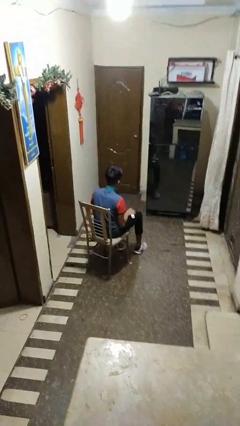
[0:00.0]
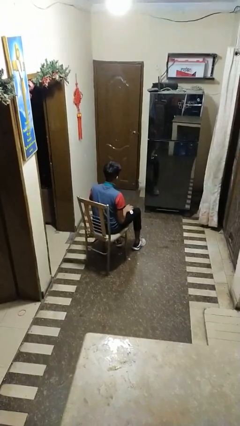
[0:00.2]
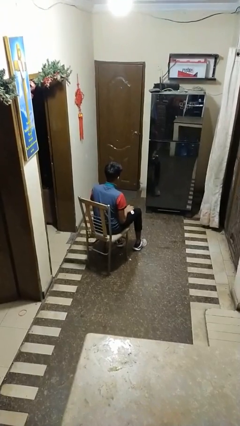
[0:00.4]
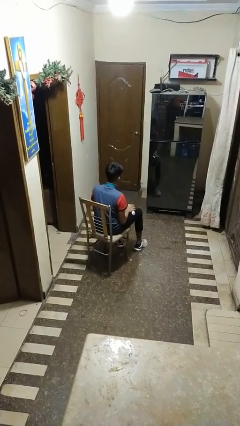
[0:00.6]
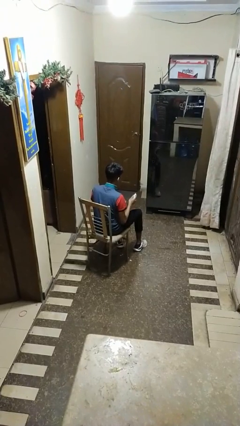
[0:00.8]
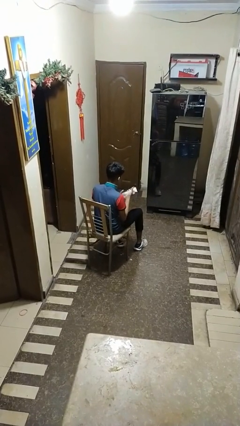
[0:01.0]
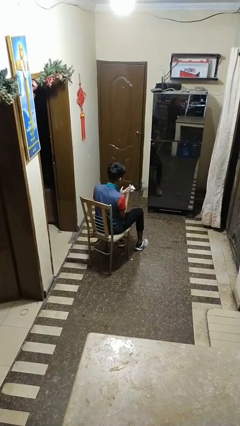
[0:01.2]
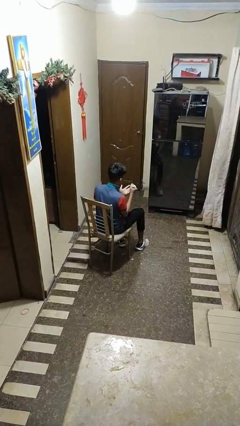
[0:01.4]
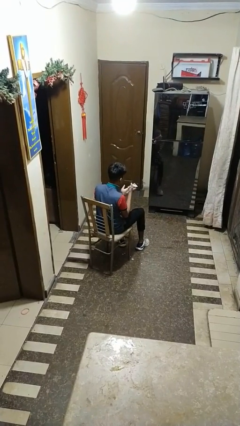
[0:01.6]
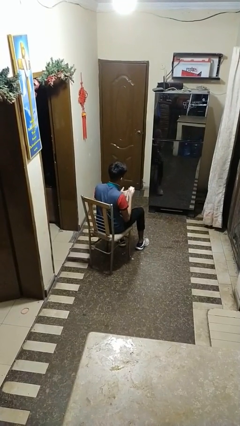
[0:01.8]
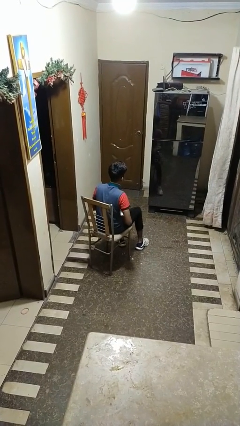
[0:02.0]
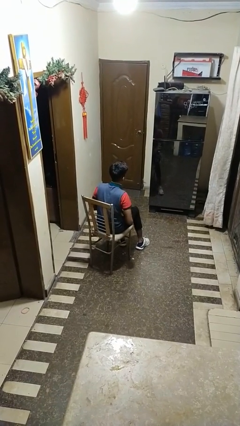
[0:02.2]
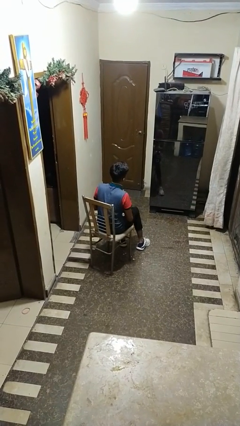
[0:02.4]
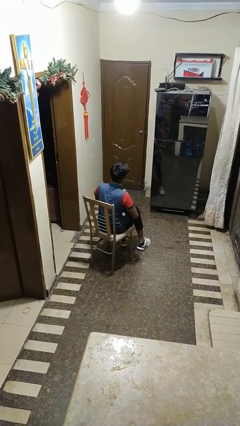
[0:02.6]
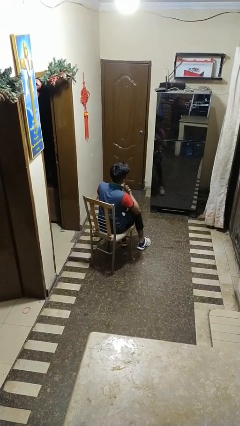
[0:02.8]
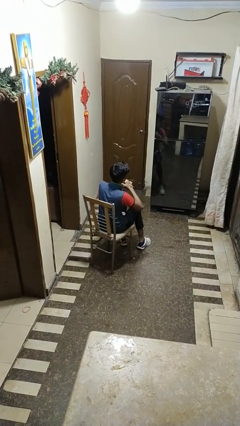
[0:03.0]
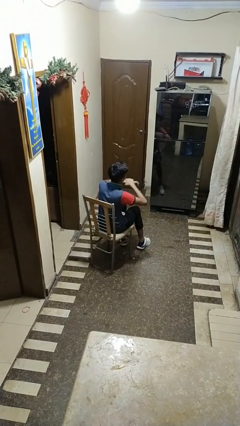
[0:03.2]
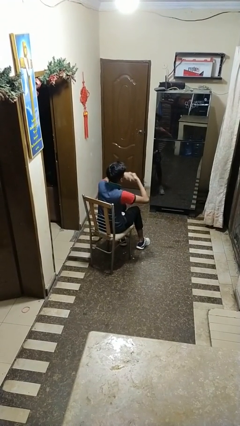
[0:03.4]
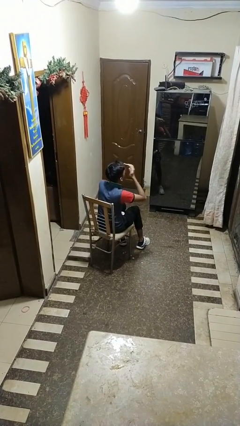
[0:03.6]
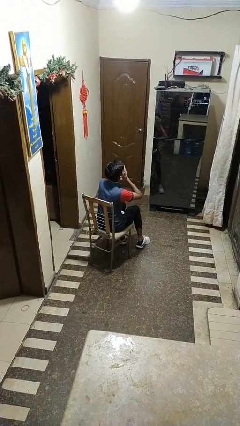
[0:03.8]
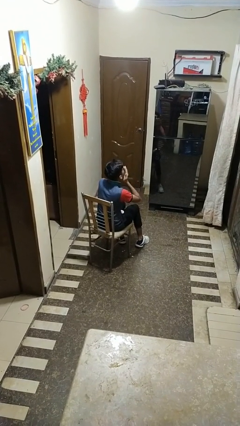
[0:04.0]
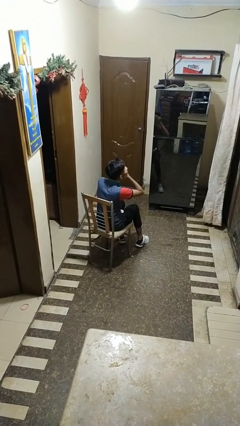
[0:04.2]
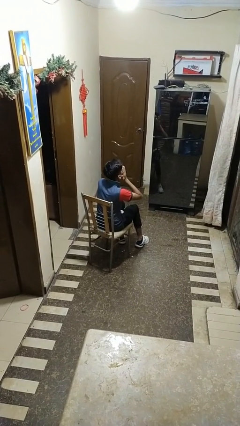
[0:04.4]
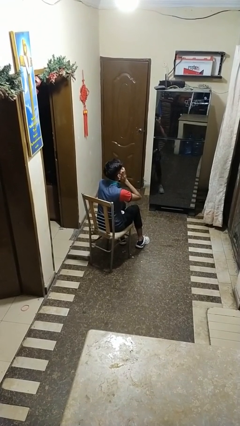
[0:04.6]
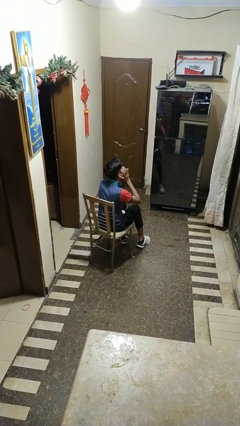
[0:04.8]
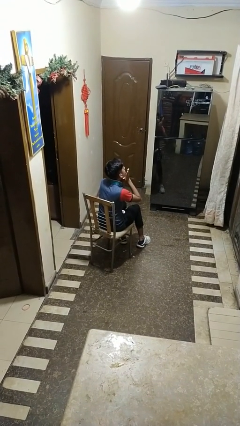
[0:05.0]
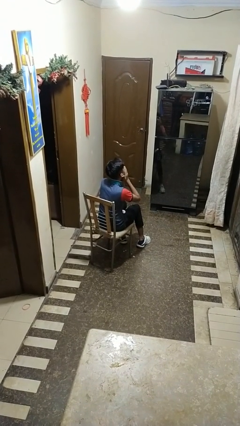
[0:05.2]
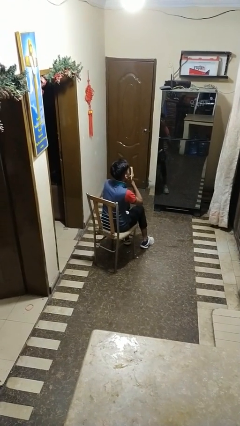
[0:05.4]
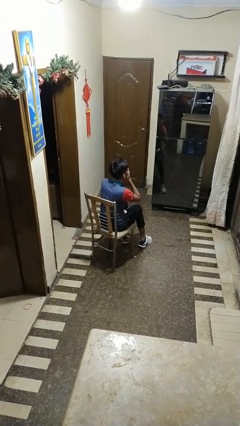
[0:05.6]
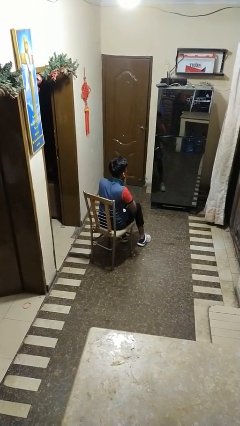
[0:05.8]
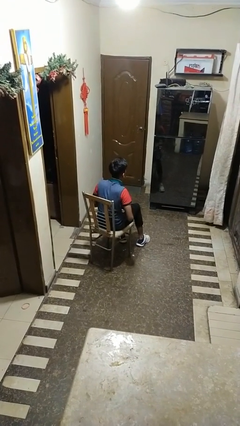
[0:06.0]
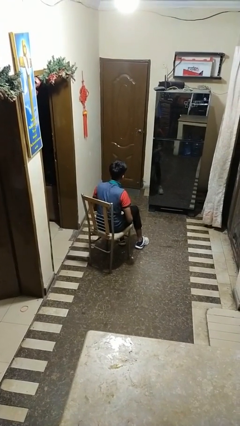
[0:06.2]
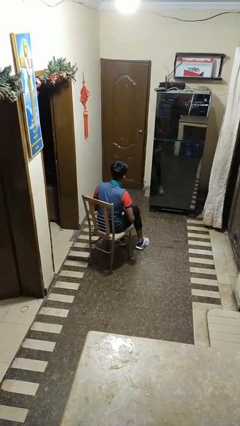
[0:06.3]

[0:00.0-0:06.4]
person applies facial moisturizer

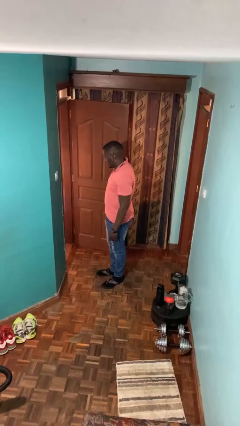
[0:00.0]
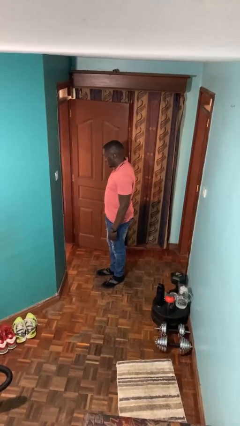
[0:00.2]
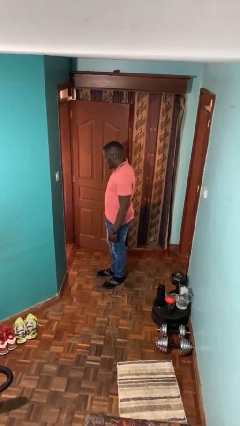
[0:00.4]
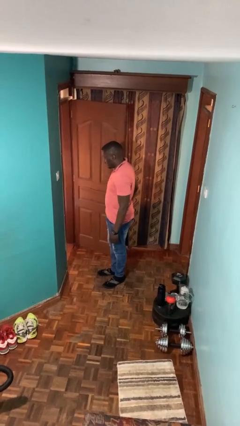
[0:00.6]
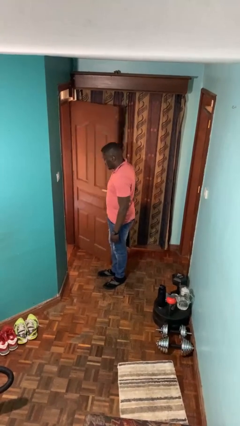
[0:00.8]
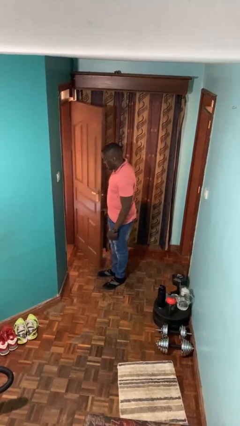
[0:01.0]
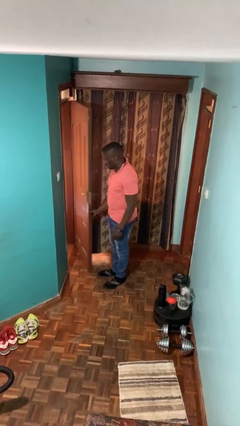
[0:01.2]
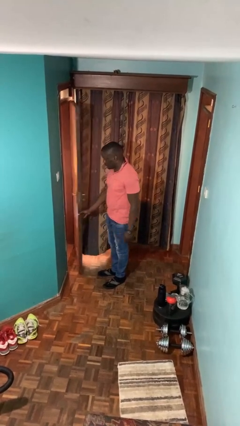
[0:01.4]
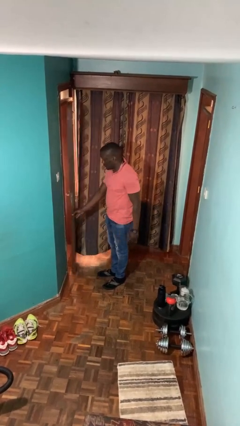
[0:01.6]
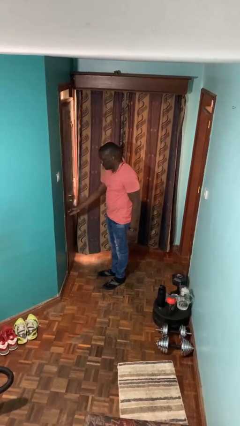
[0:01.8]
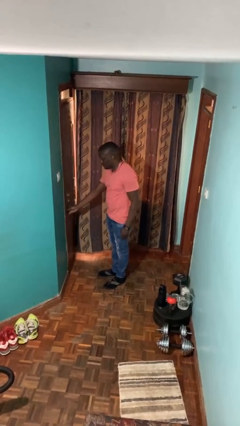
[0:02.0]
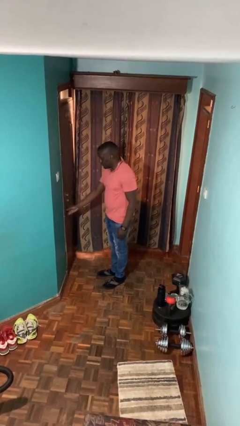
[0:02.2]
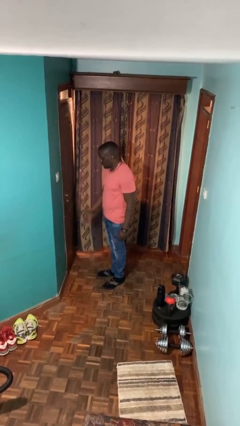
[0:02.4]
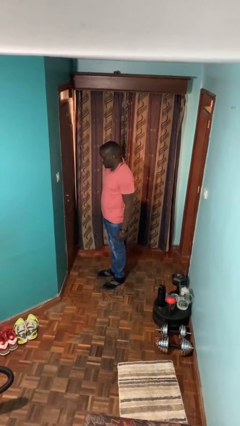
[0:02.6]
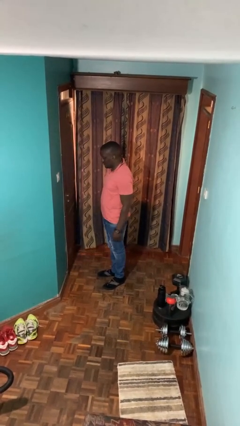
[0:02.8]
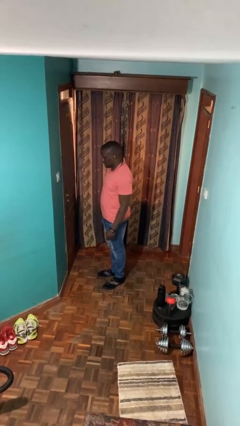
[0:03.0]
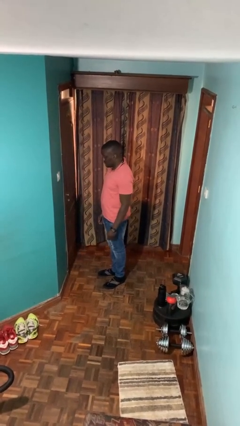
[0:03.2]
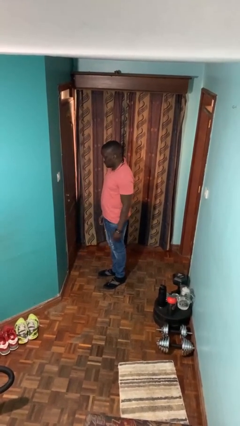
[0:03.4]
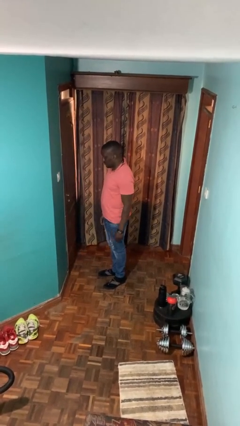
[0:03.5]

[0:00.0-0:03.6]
person closes facility door

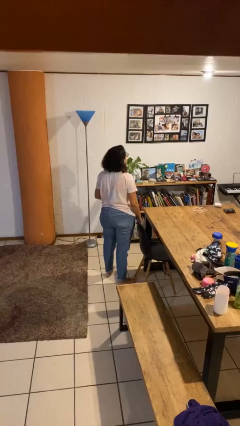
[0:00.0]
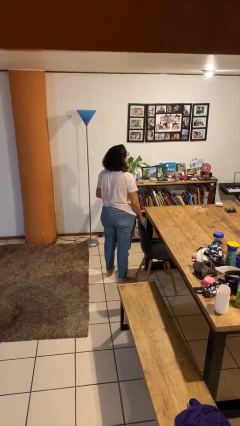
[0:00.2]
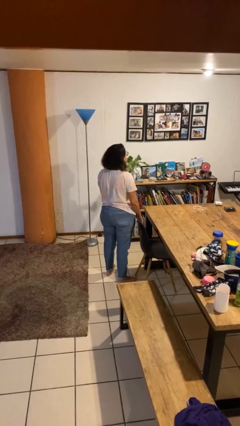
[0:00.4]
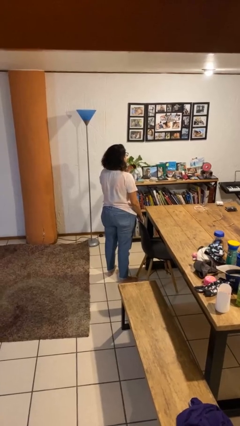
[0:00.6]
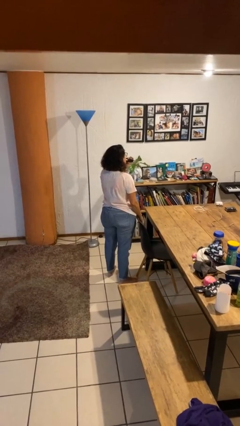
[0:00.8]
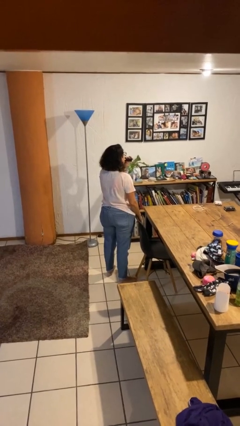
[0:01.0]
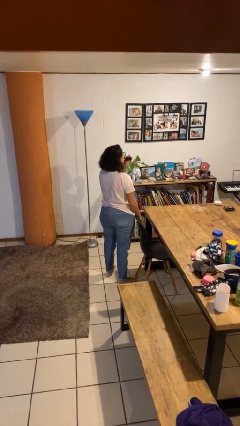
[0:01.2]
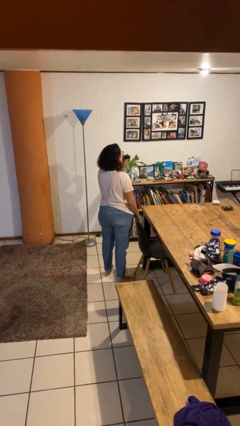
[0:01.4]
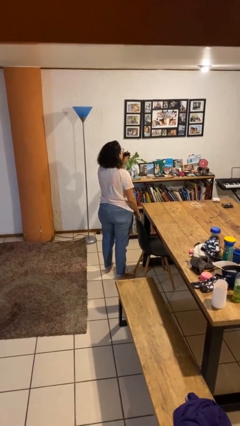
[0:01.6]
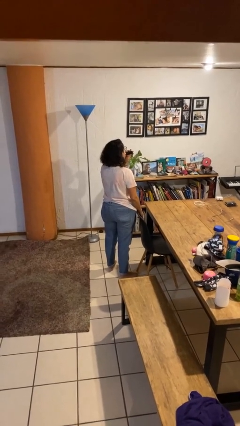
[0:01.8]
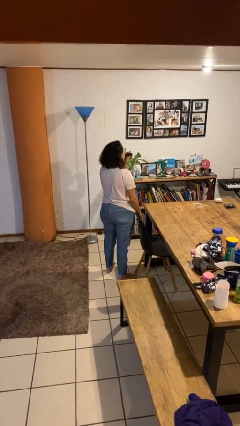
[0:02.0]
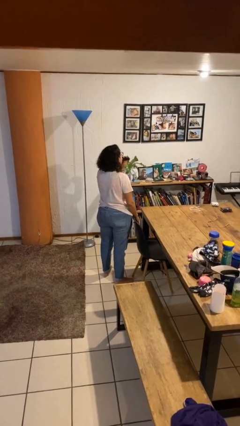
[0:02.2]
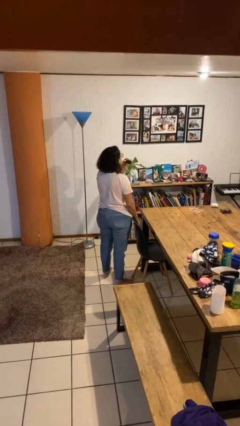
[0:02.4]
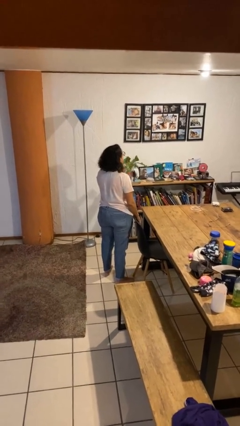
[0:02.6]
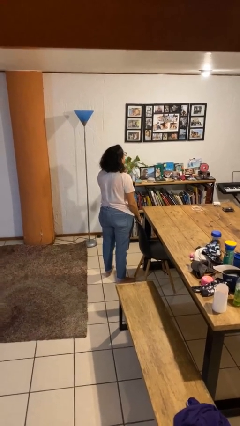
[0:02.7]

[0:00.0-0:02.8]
person vapes

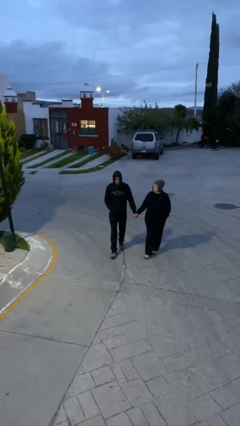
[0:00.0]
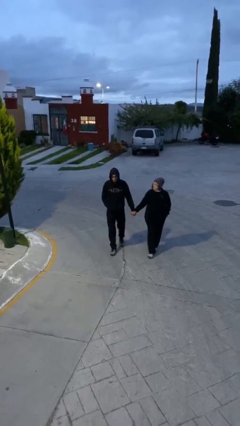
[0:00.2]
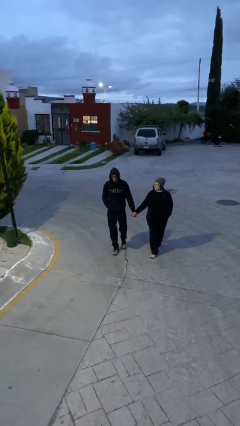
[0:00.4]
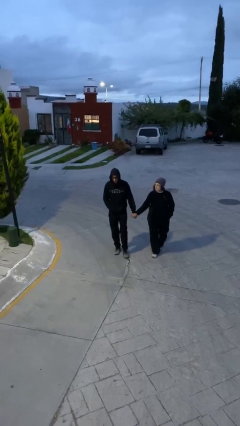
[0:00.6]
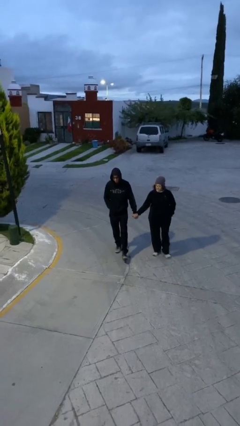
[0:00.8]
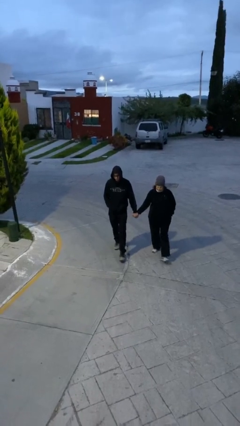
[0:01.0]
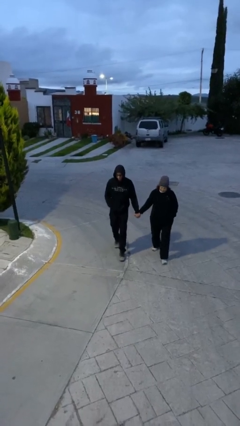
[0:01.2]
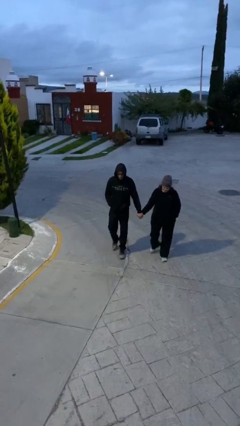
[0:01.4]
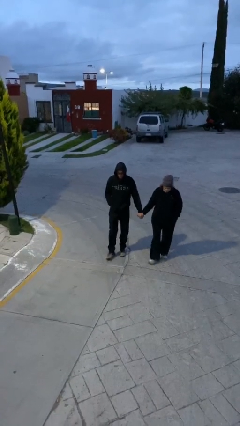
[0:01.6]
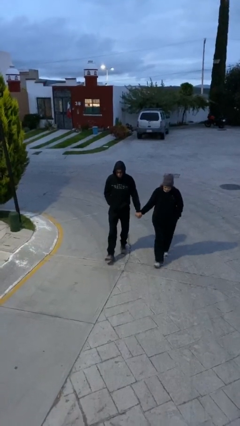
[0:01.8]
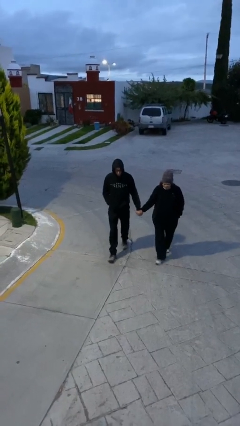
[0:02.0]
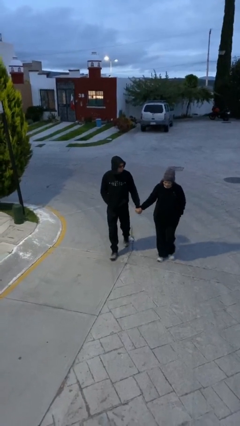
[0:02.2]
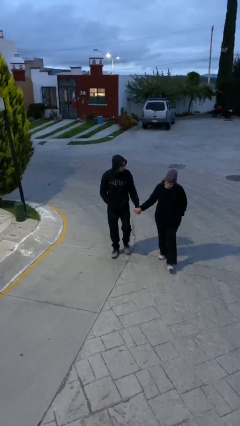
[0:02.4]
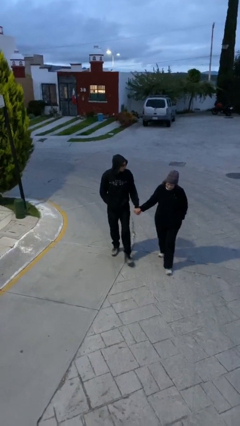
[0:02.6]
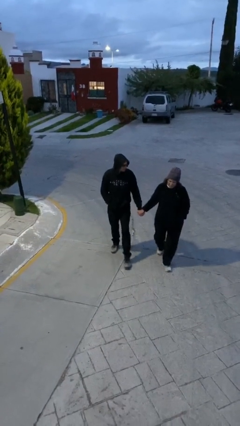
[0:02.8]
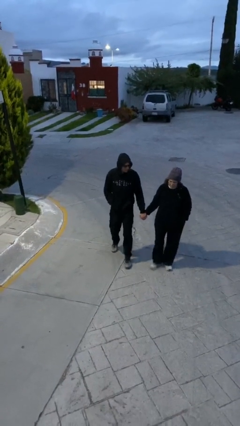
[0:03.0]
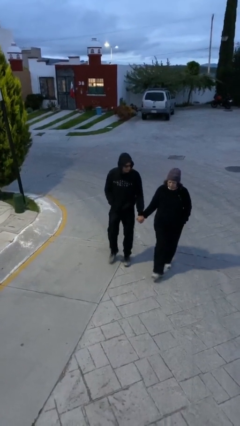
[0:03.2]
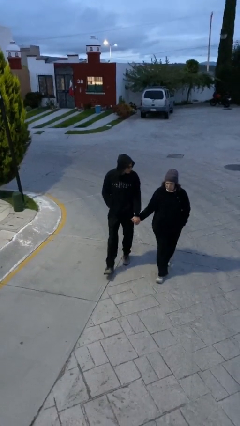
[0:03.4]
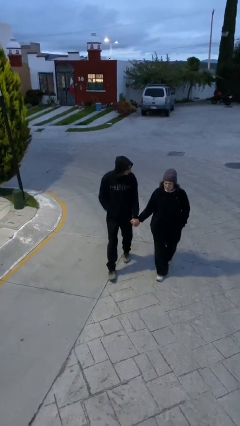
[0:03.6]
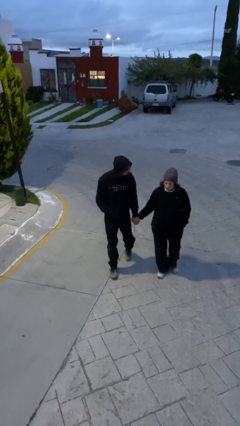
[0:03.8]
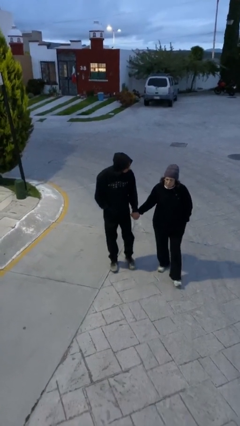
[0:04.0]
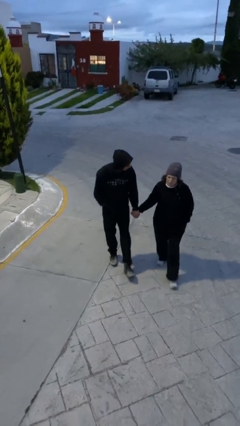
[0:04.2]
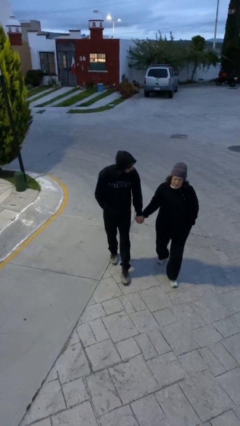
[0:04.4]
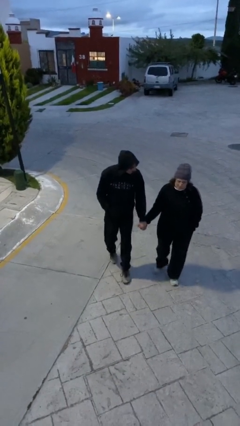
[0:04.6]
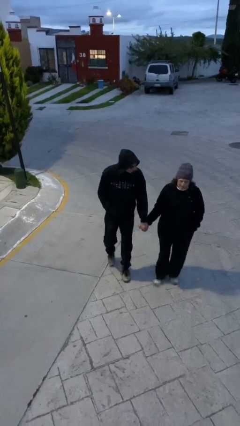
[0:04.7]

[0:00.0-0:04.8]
person holds hand

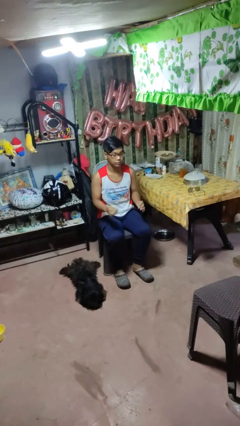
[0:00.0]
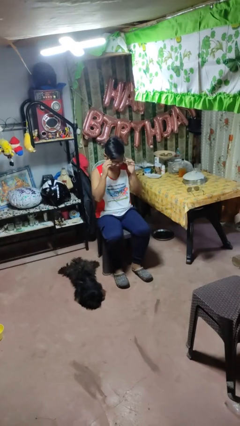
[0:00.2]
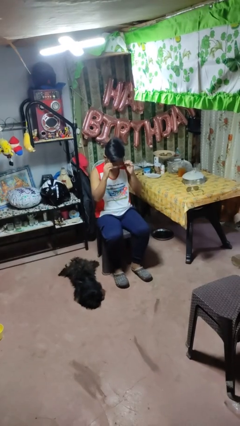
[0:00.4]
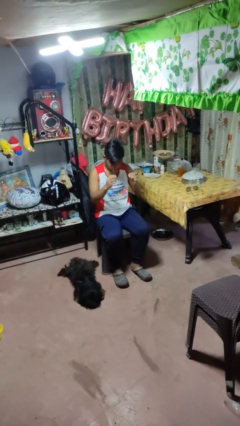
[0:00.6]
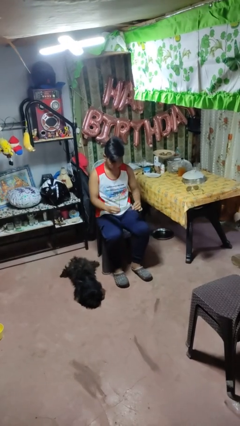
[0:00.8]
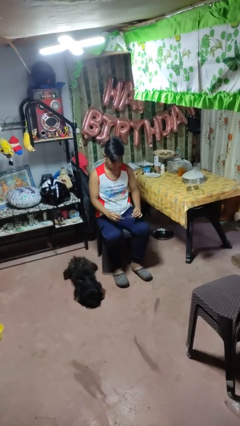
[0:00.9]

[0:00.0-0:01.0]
person takes off glasses
